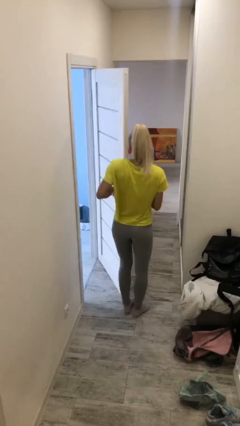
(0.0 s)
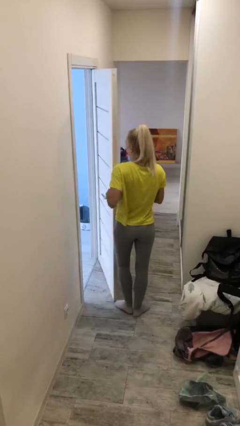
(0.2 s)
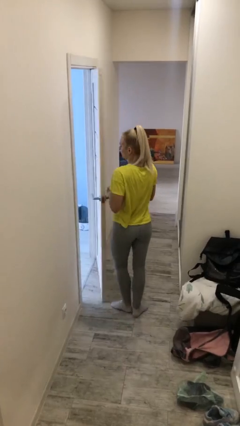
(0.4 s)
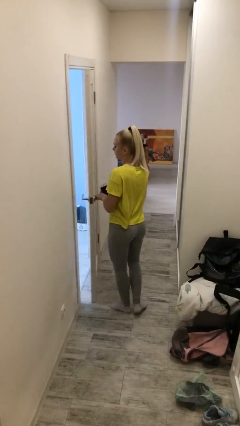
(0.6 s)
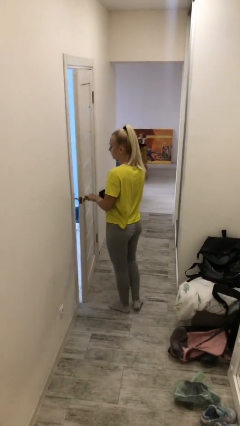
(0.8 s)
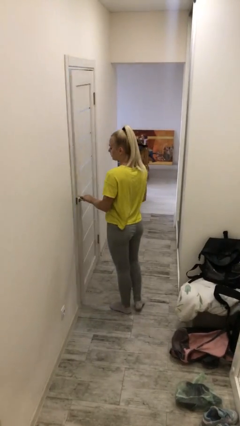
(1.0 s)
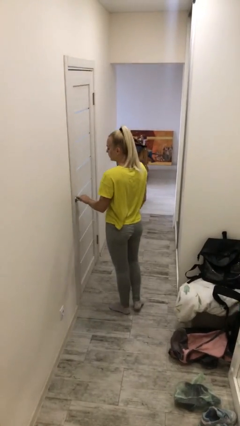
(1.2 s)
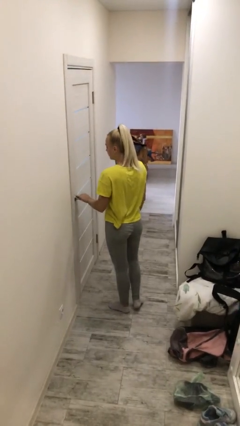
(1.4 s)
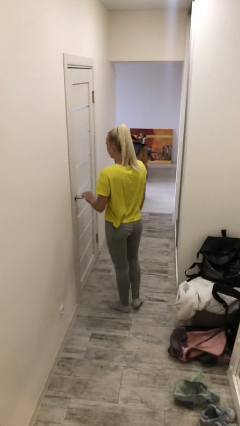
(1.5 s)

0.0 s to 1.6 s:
person closes facility door

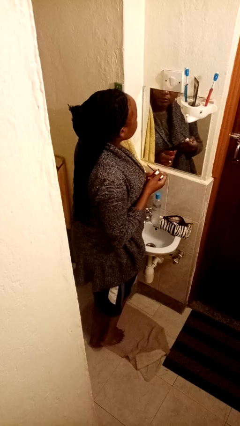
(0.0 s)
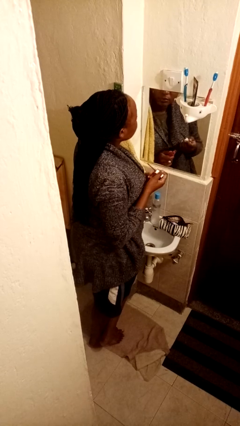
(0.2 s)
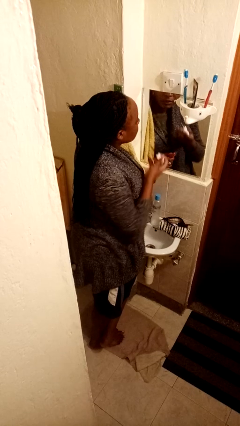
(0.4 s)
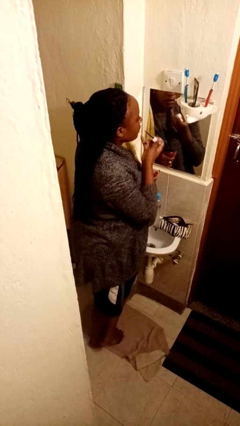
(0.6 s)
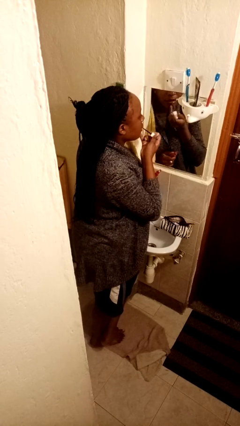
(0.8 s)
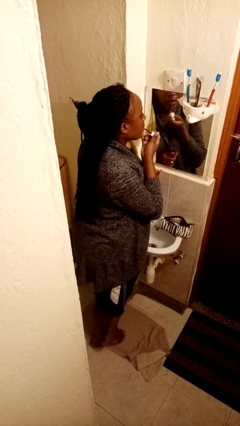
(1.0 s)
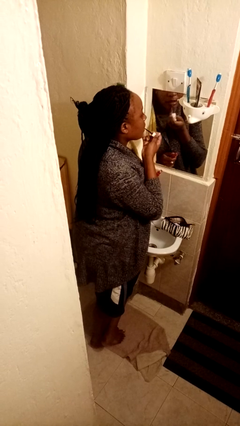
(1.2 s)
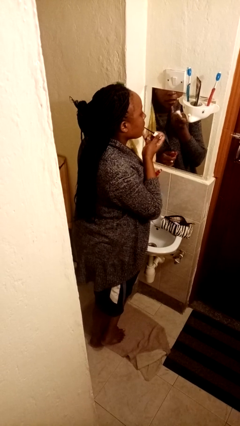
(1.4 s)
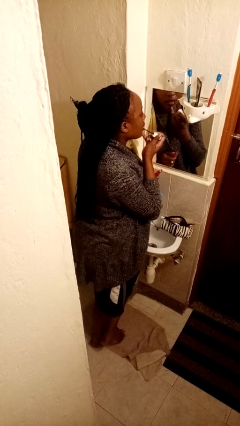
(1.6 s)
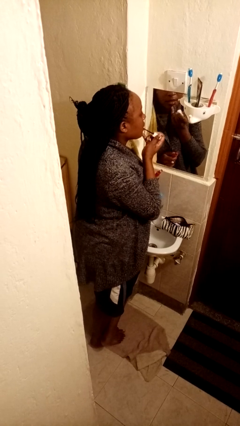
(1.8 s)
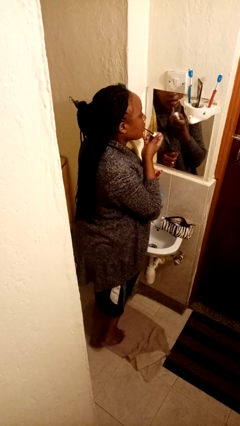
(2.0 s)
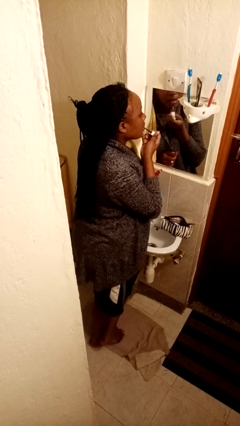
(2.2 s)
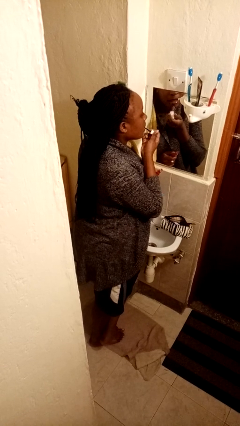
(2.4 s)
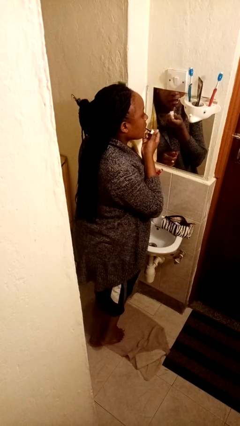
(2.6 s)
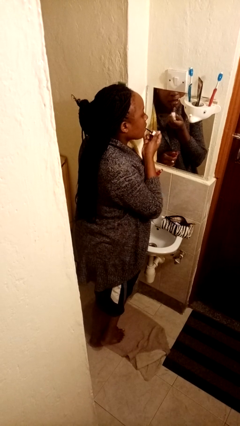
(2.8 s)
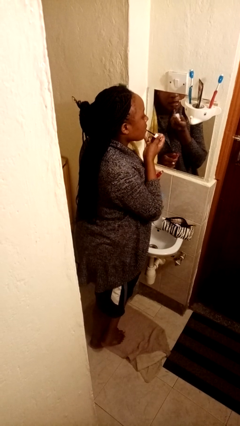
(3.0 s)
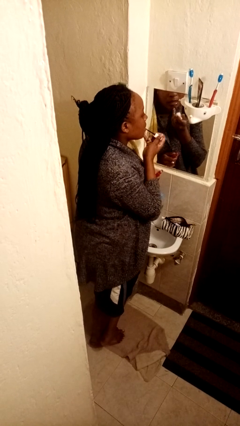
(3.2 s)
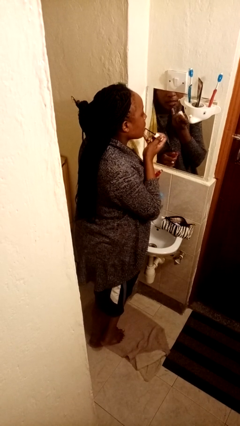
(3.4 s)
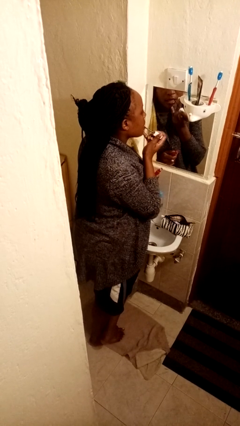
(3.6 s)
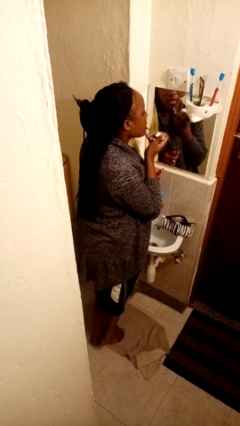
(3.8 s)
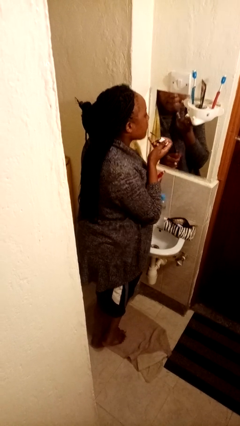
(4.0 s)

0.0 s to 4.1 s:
person applies lip makeup

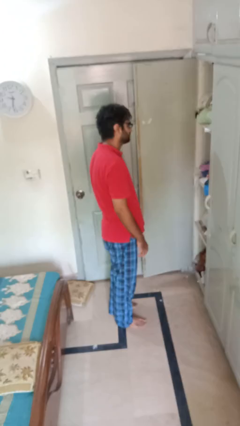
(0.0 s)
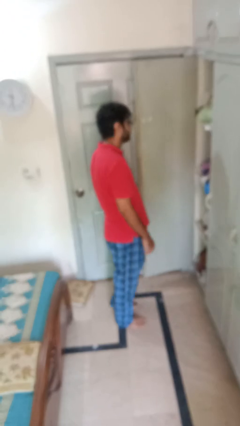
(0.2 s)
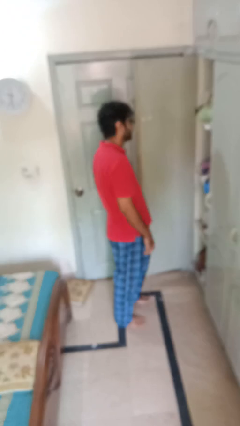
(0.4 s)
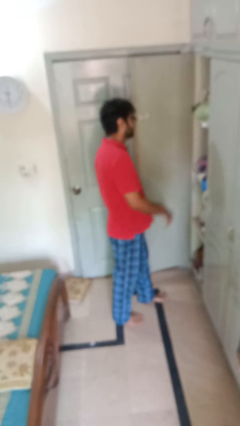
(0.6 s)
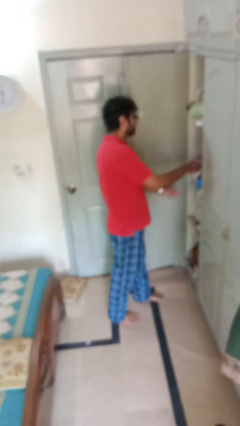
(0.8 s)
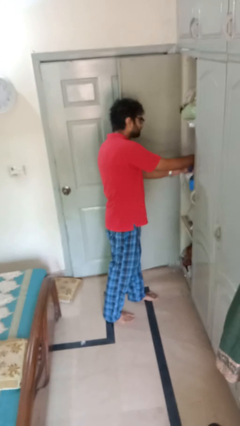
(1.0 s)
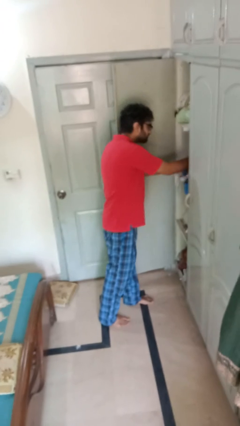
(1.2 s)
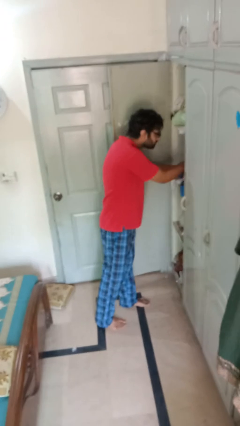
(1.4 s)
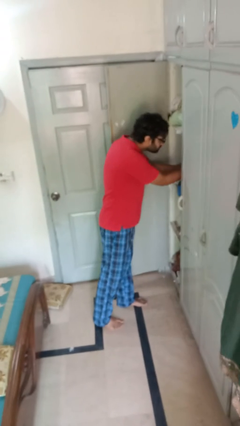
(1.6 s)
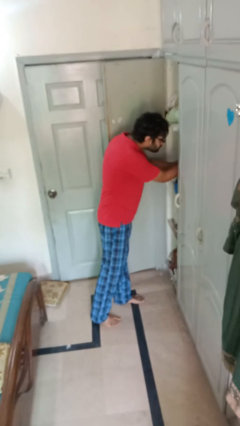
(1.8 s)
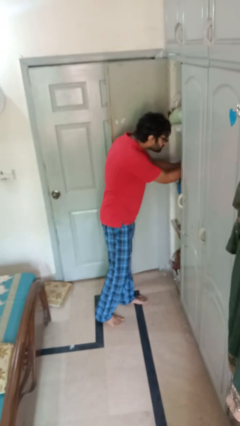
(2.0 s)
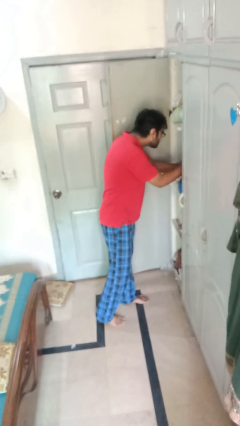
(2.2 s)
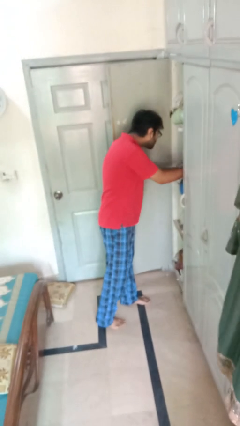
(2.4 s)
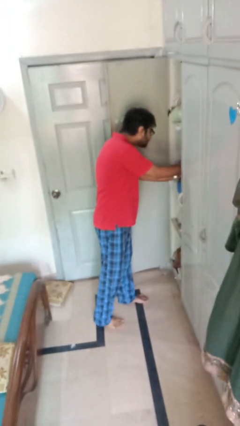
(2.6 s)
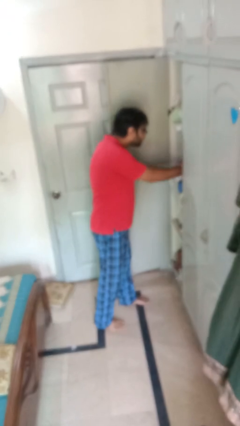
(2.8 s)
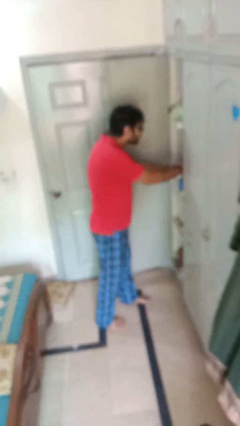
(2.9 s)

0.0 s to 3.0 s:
person searches in cabinet

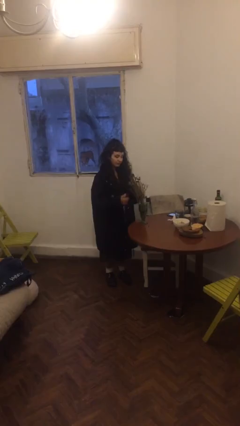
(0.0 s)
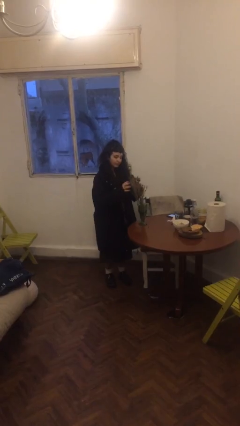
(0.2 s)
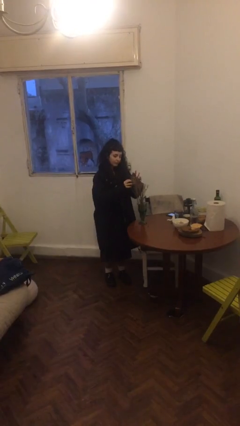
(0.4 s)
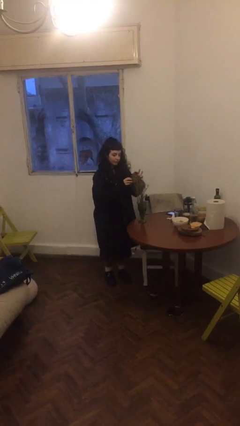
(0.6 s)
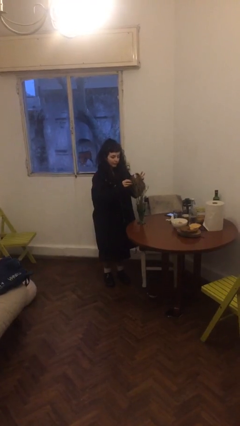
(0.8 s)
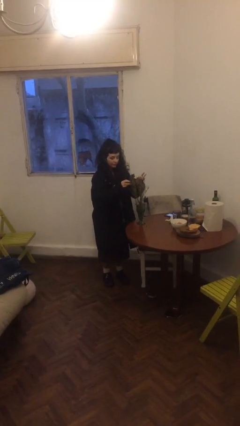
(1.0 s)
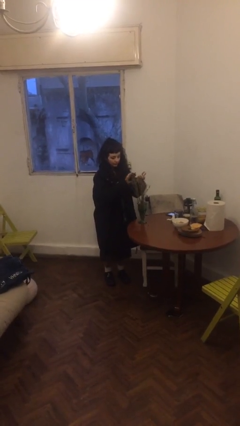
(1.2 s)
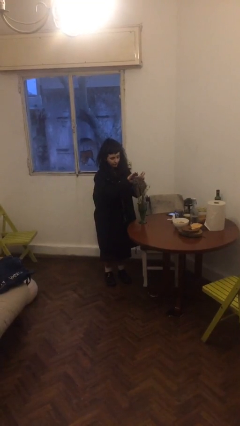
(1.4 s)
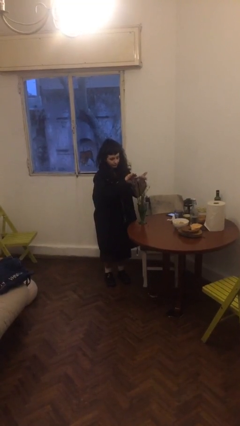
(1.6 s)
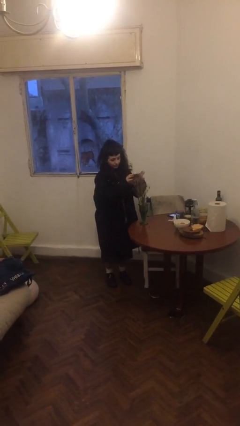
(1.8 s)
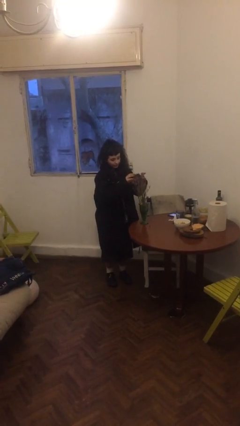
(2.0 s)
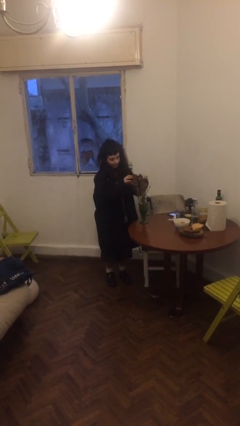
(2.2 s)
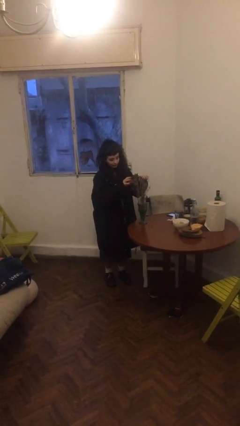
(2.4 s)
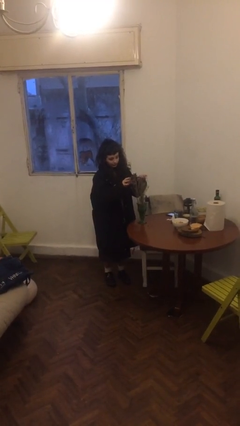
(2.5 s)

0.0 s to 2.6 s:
person arranges flowers in vase

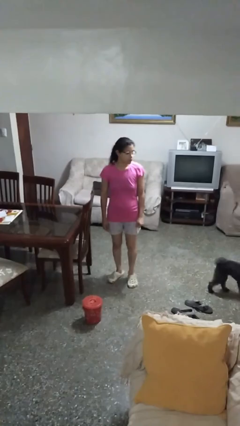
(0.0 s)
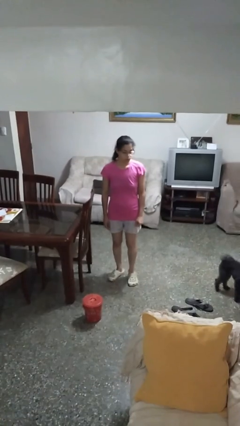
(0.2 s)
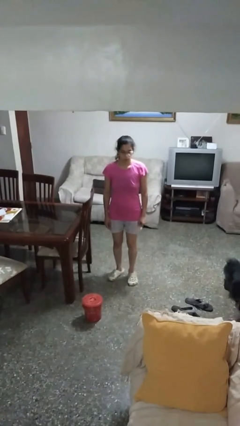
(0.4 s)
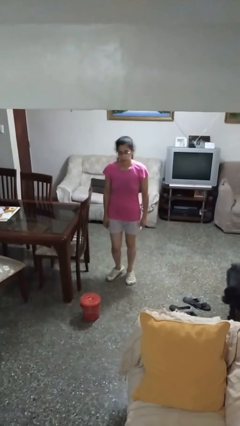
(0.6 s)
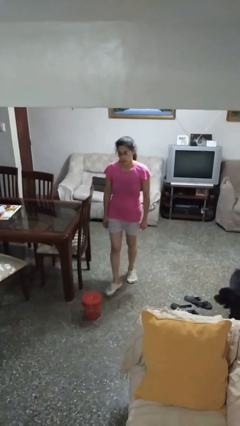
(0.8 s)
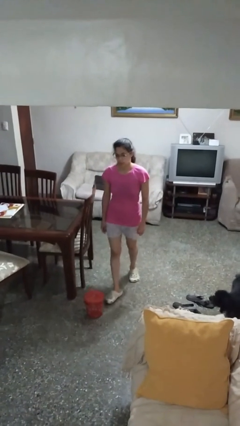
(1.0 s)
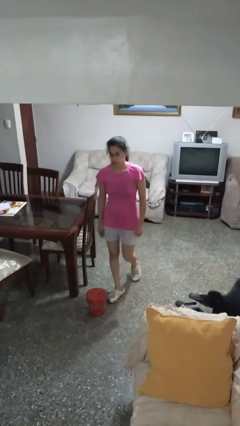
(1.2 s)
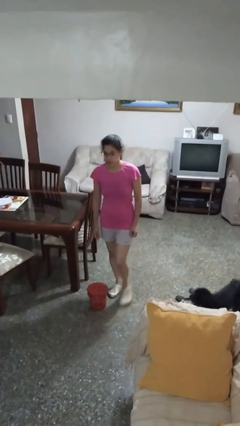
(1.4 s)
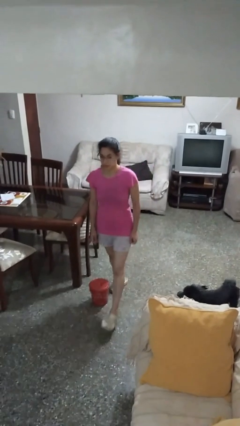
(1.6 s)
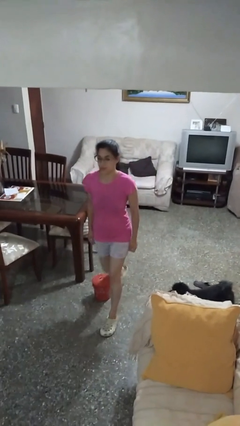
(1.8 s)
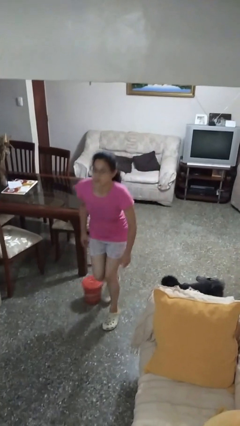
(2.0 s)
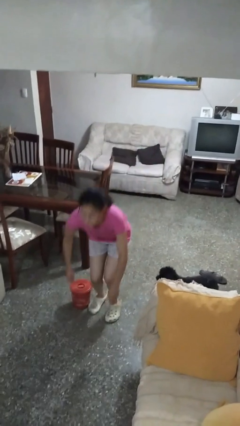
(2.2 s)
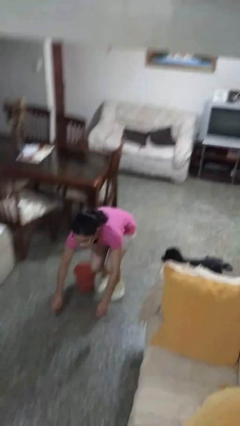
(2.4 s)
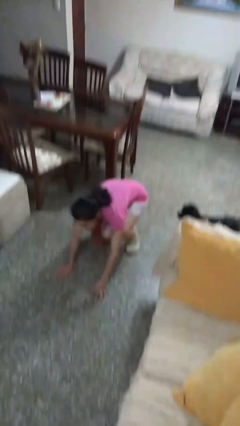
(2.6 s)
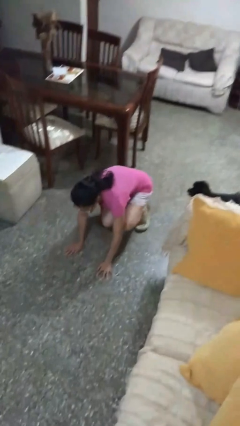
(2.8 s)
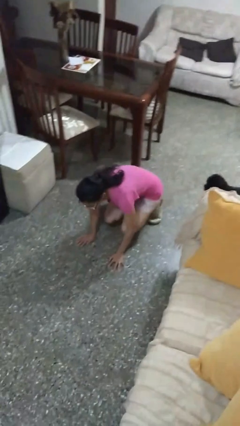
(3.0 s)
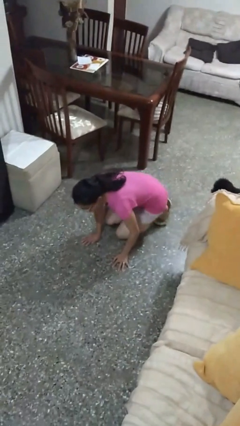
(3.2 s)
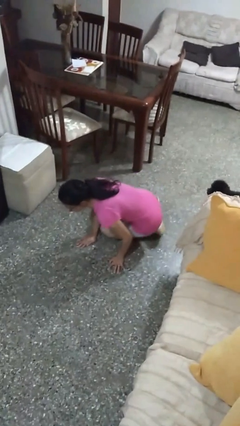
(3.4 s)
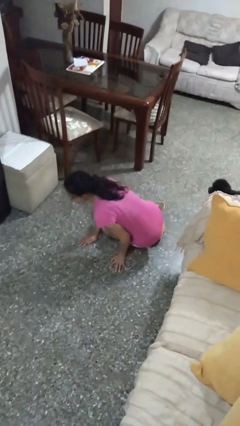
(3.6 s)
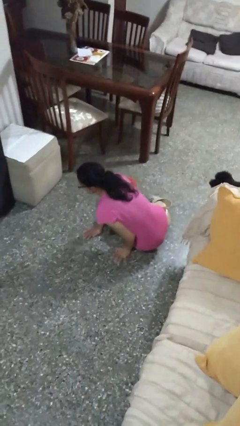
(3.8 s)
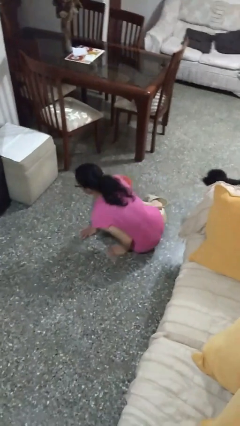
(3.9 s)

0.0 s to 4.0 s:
person trips on object on floor

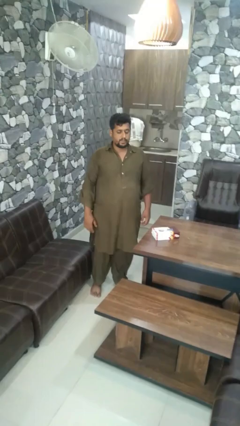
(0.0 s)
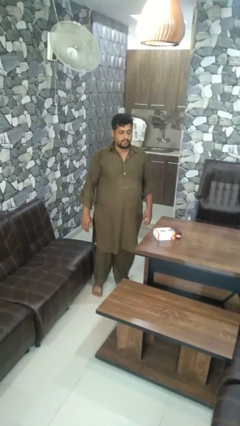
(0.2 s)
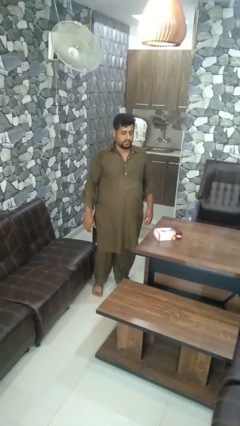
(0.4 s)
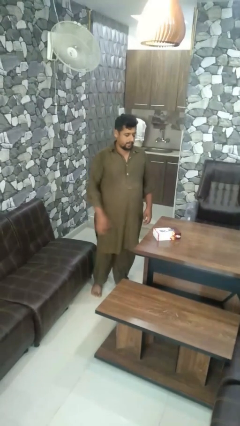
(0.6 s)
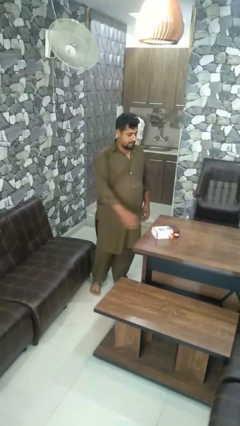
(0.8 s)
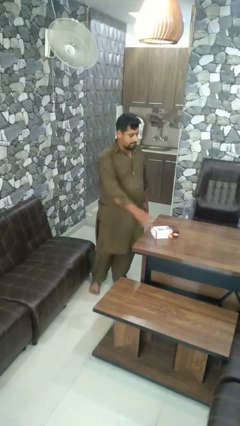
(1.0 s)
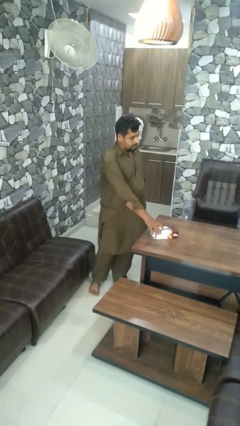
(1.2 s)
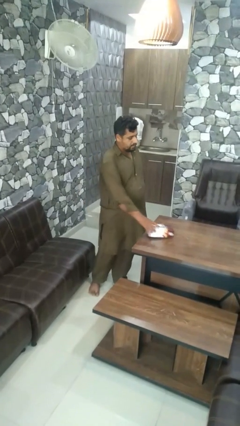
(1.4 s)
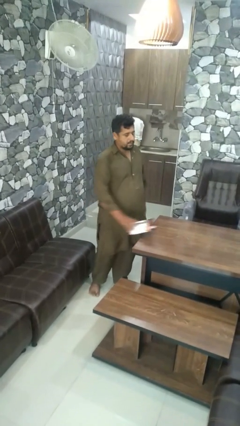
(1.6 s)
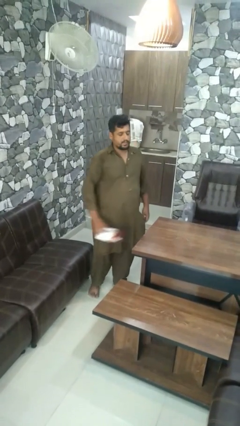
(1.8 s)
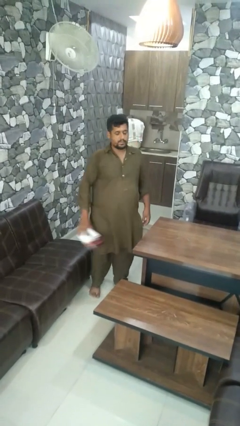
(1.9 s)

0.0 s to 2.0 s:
person picks up object from table
